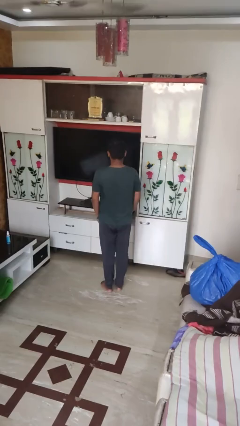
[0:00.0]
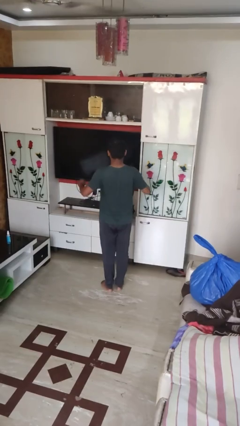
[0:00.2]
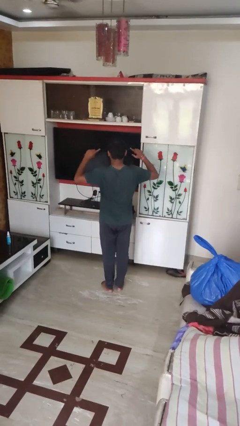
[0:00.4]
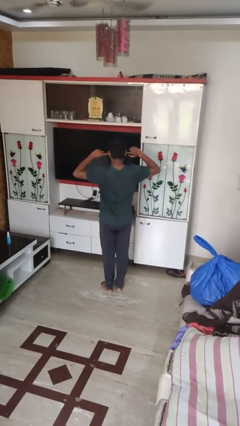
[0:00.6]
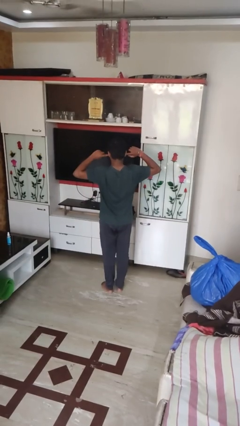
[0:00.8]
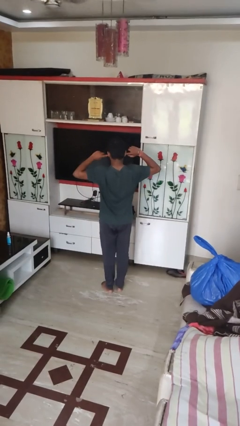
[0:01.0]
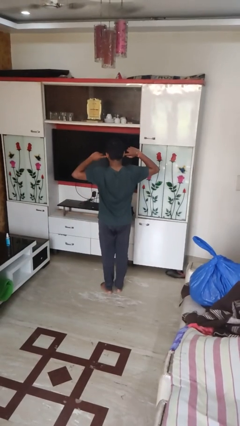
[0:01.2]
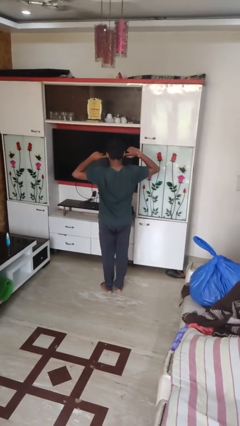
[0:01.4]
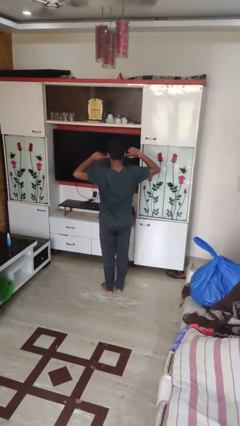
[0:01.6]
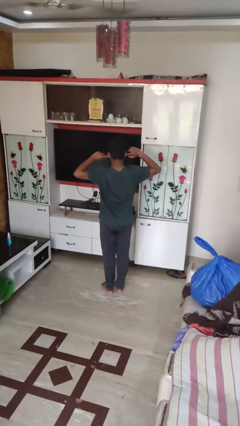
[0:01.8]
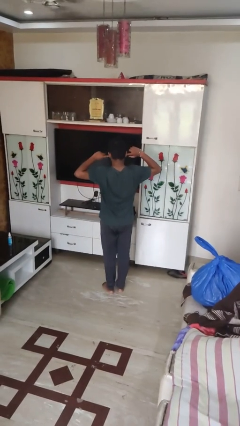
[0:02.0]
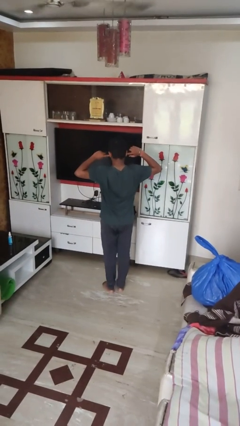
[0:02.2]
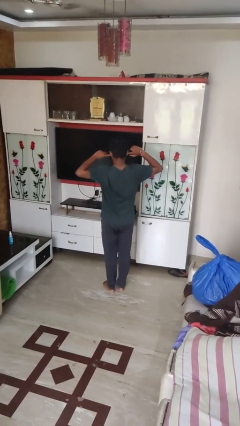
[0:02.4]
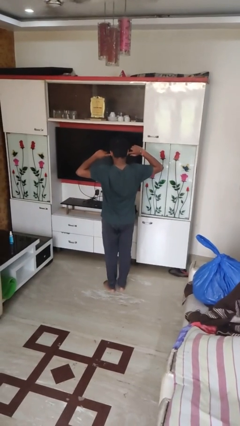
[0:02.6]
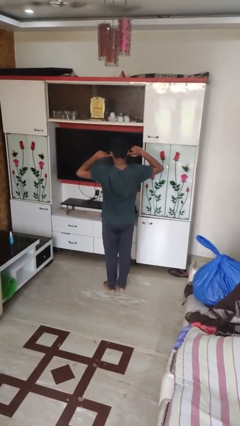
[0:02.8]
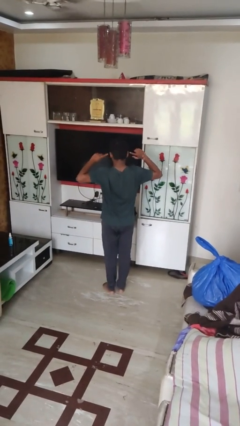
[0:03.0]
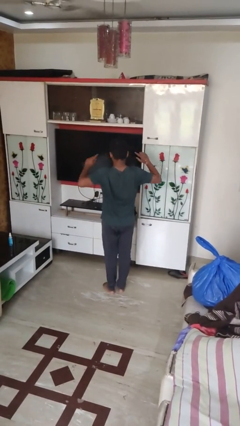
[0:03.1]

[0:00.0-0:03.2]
person puts fingers in ear

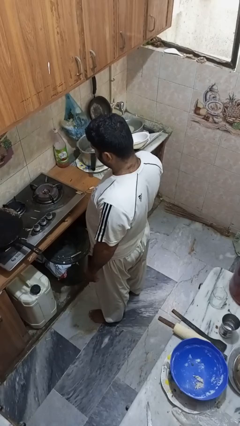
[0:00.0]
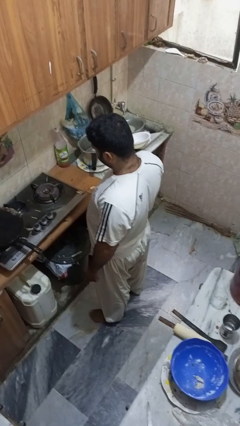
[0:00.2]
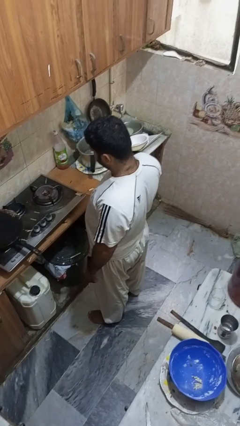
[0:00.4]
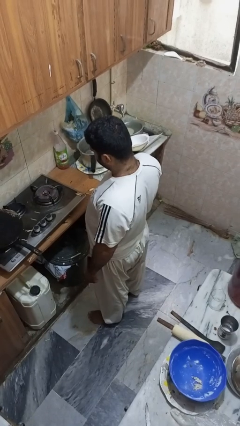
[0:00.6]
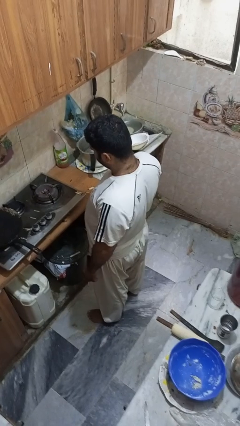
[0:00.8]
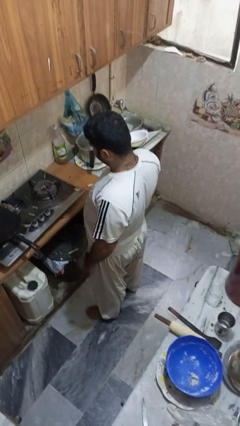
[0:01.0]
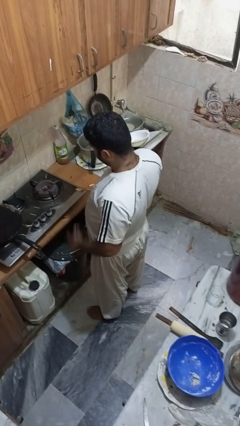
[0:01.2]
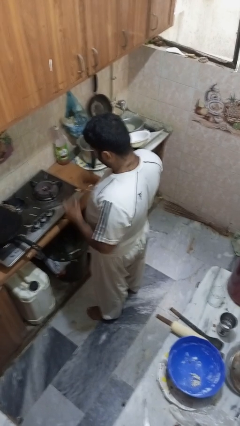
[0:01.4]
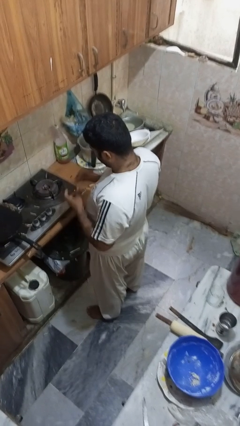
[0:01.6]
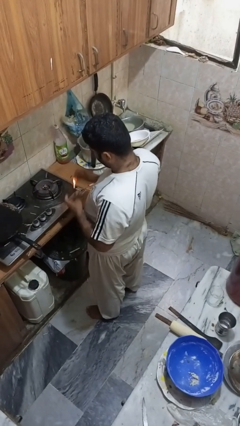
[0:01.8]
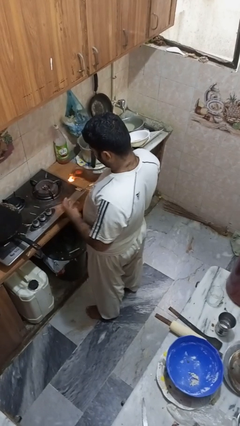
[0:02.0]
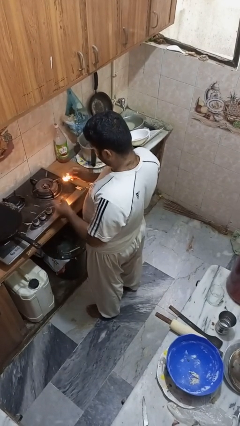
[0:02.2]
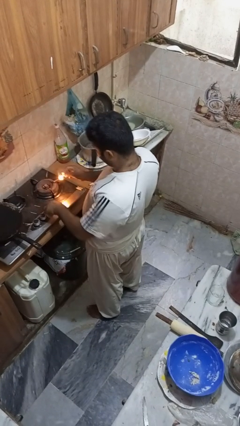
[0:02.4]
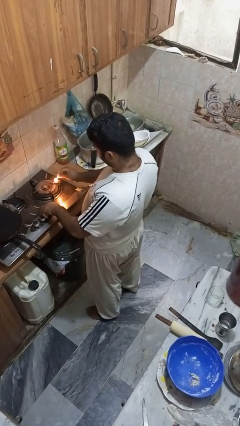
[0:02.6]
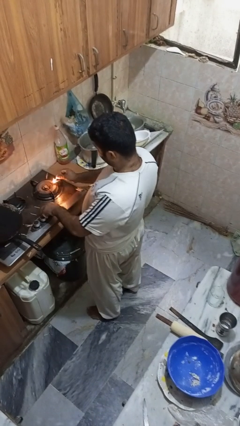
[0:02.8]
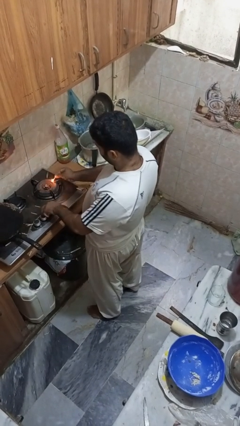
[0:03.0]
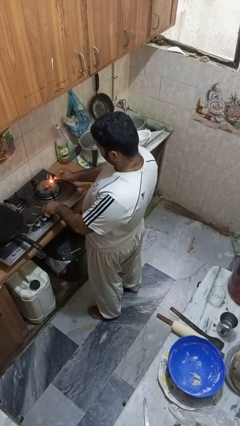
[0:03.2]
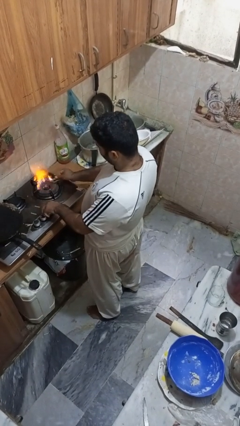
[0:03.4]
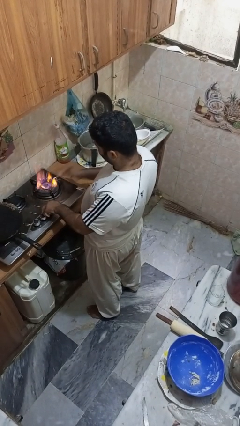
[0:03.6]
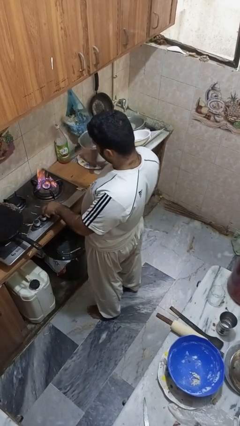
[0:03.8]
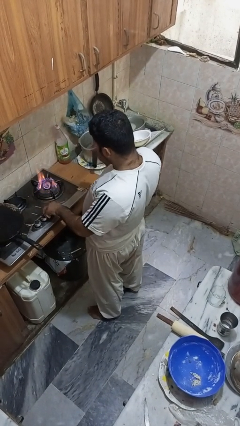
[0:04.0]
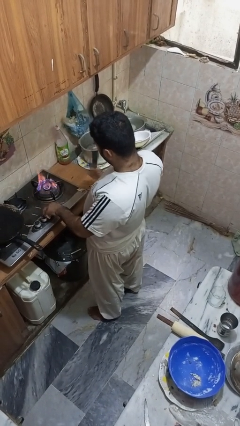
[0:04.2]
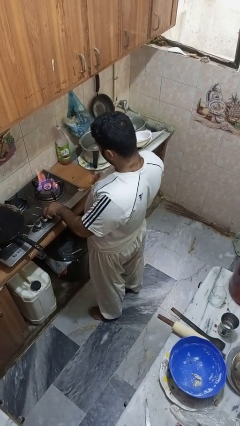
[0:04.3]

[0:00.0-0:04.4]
person turns on stovetop

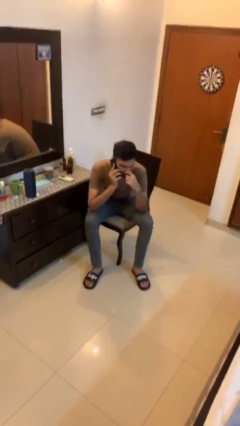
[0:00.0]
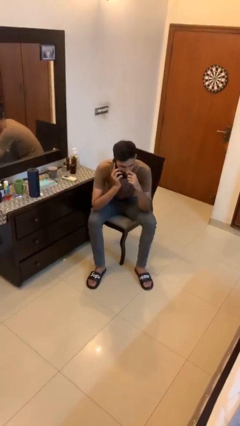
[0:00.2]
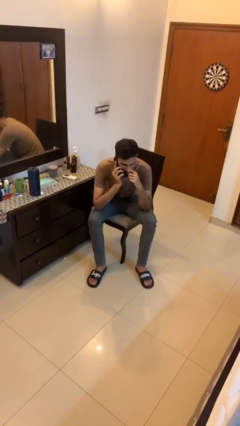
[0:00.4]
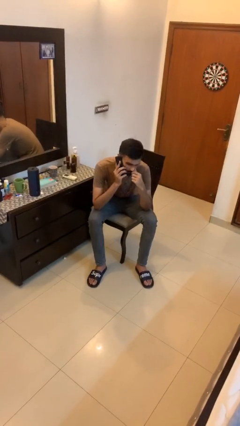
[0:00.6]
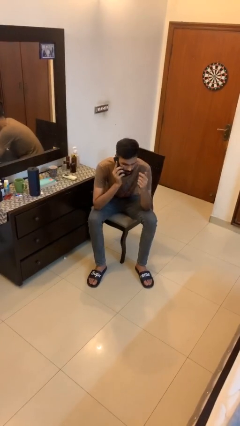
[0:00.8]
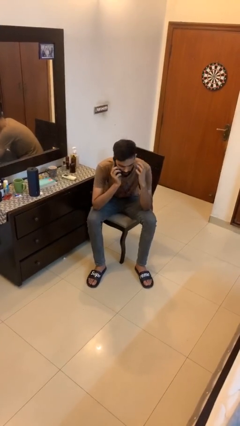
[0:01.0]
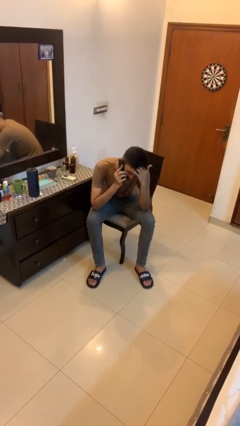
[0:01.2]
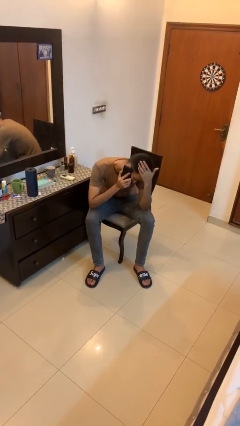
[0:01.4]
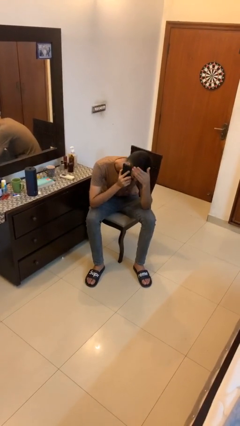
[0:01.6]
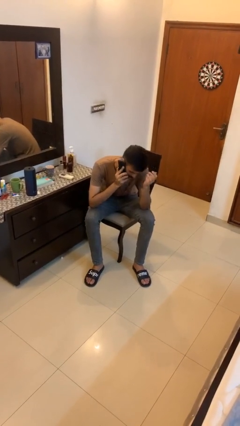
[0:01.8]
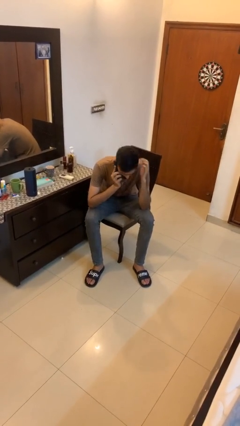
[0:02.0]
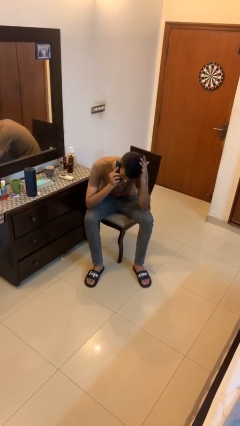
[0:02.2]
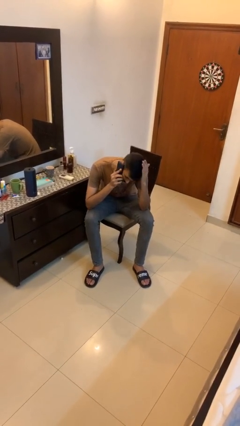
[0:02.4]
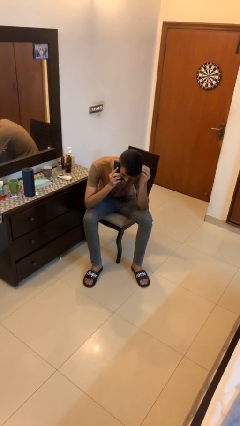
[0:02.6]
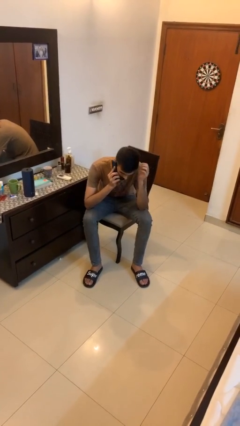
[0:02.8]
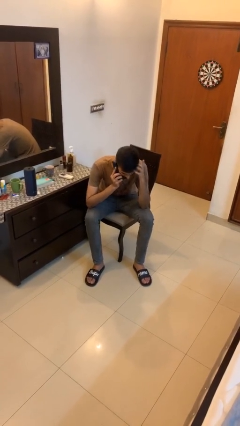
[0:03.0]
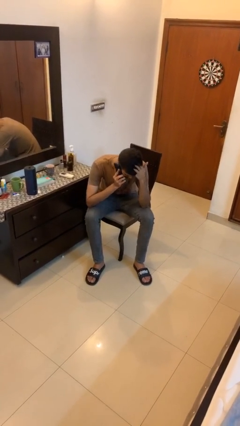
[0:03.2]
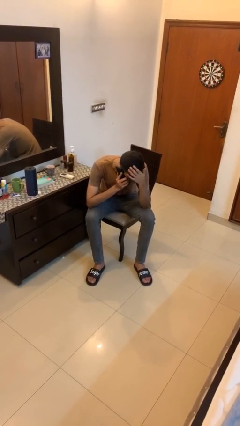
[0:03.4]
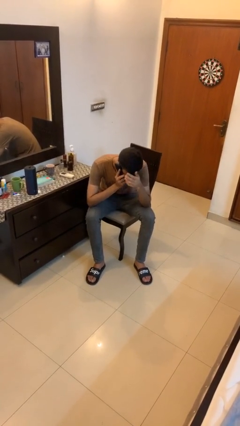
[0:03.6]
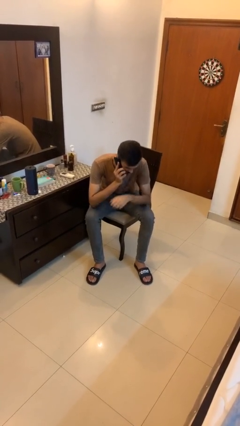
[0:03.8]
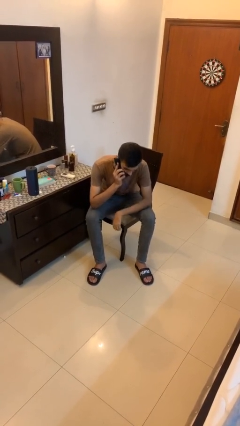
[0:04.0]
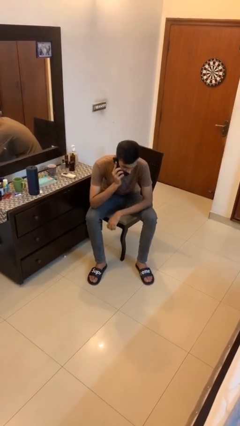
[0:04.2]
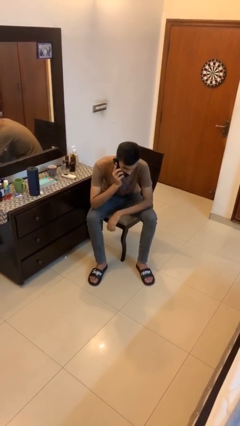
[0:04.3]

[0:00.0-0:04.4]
person talks on phone

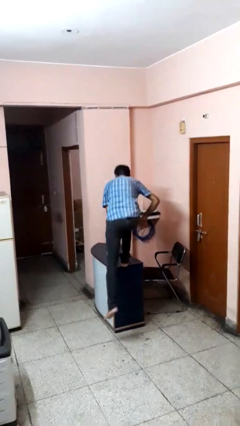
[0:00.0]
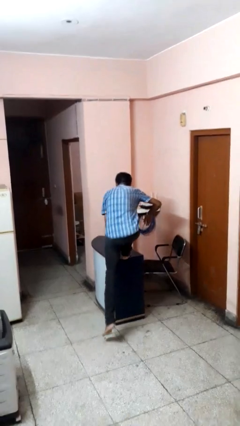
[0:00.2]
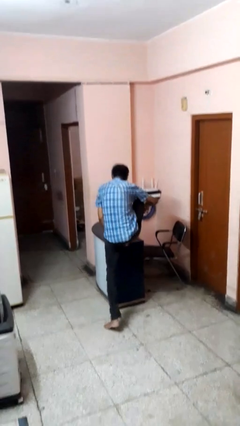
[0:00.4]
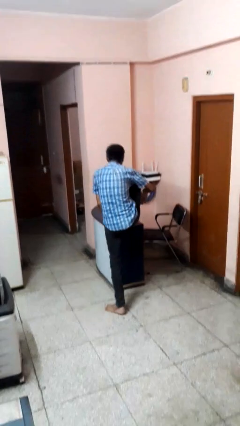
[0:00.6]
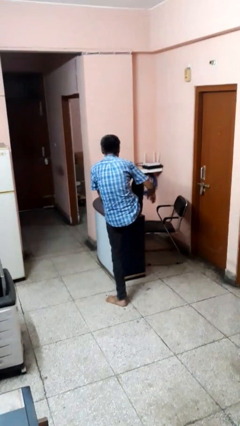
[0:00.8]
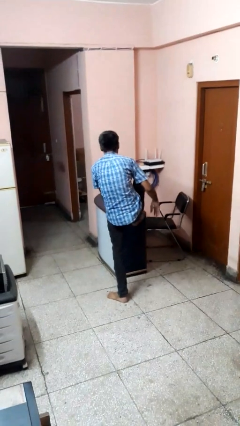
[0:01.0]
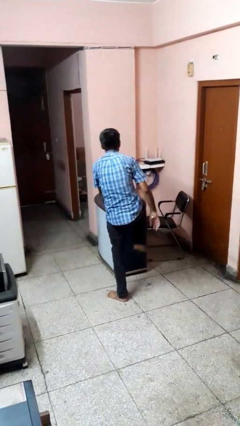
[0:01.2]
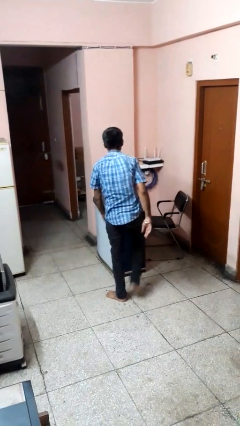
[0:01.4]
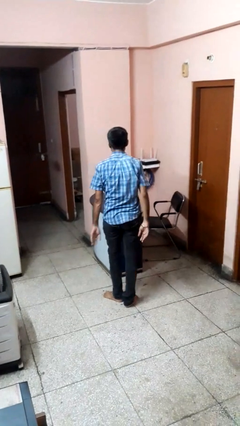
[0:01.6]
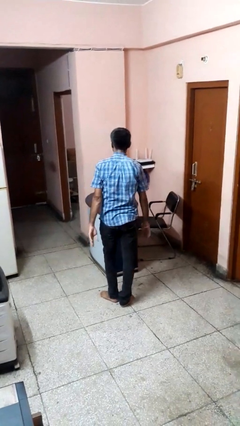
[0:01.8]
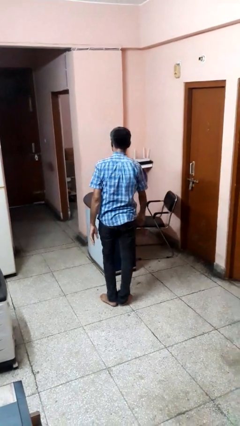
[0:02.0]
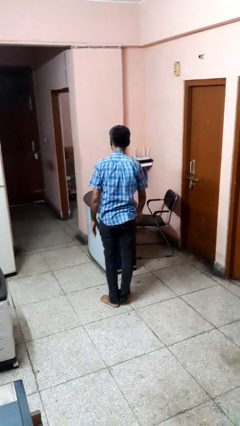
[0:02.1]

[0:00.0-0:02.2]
person climbs off table

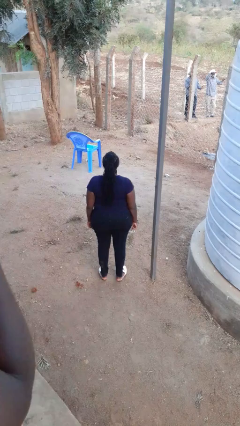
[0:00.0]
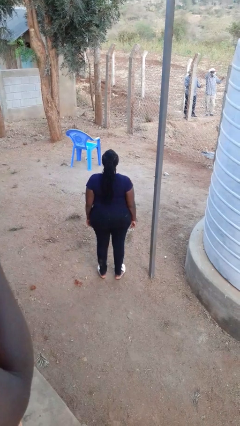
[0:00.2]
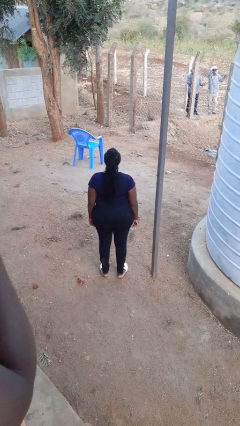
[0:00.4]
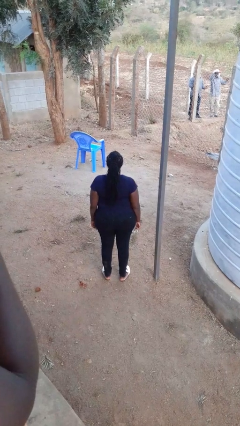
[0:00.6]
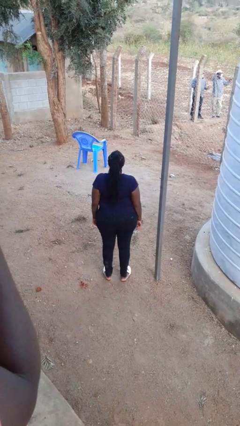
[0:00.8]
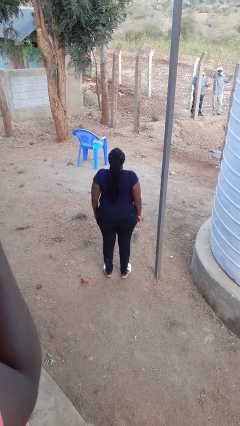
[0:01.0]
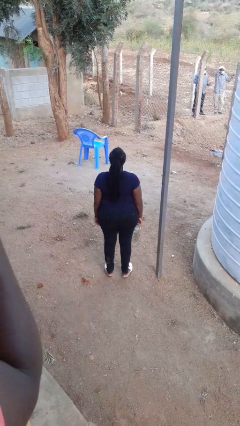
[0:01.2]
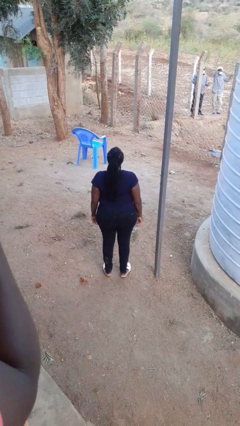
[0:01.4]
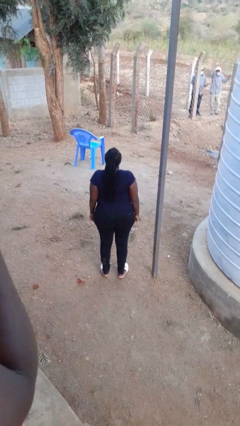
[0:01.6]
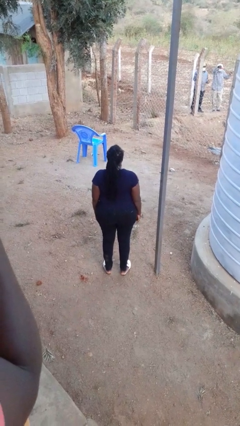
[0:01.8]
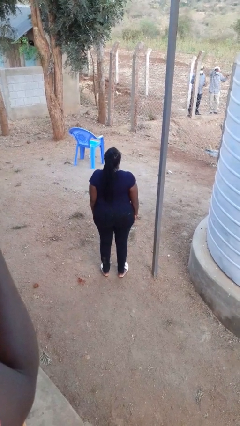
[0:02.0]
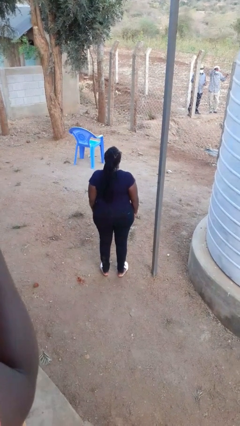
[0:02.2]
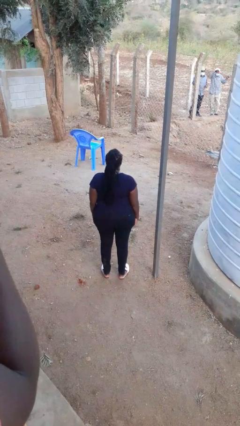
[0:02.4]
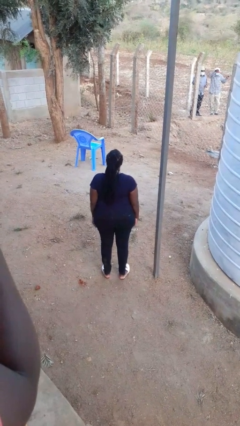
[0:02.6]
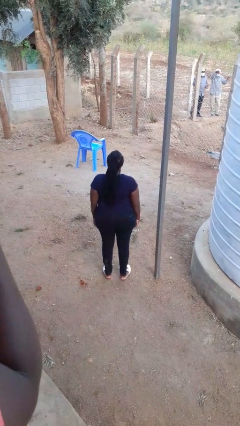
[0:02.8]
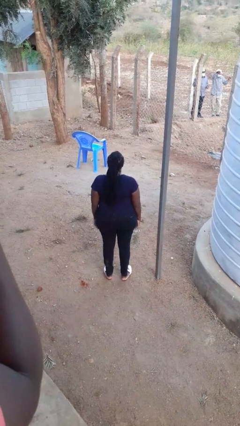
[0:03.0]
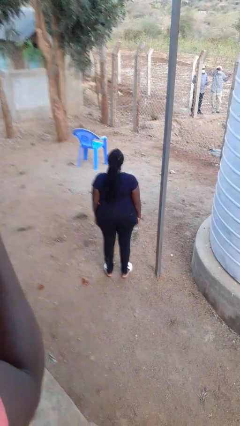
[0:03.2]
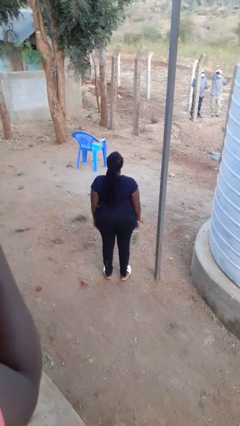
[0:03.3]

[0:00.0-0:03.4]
person shrugs
